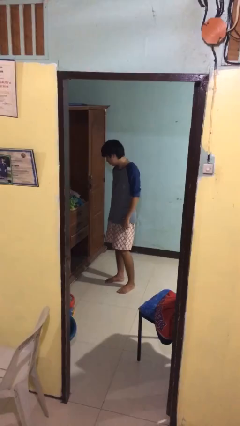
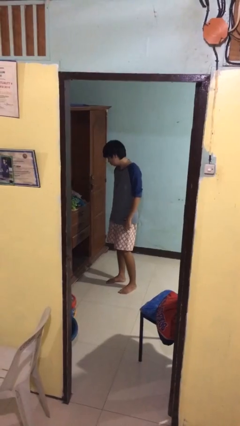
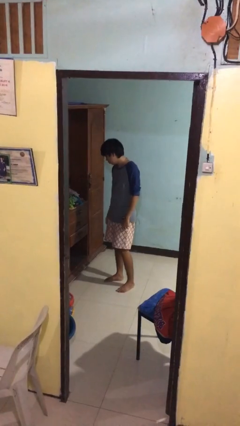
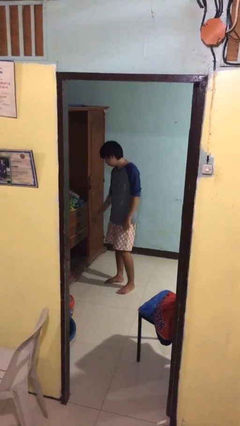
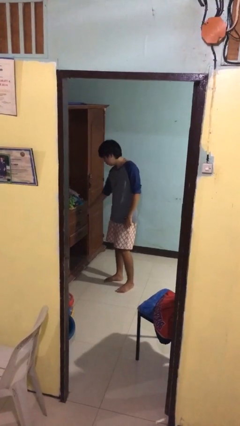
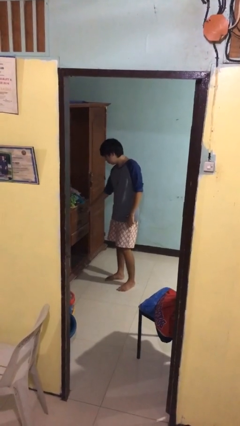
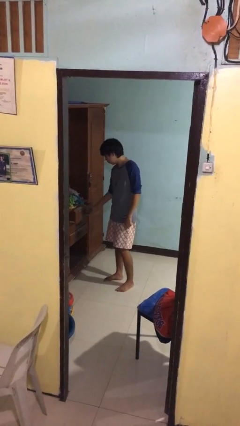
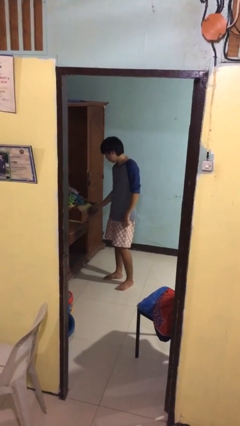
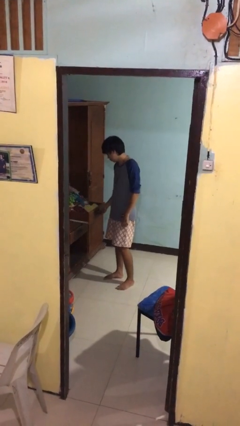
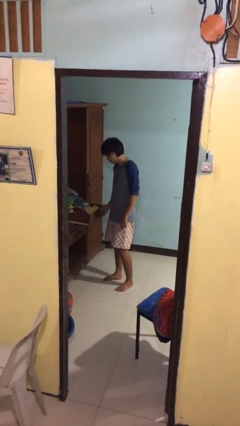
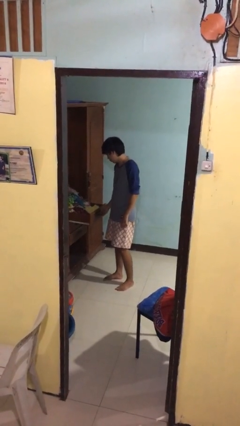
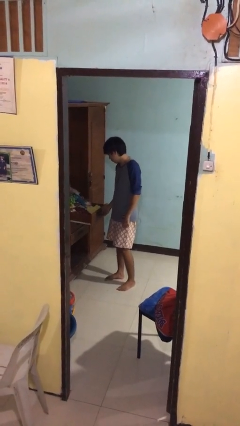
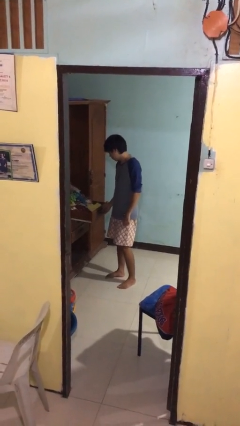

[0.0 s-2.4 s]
person opens dresser drawer

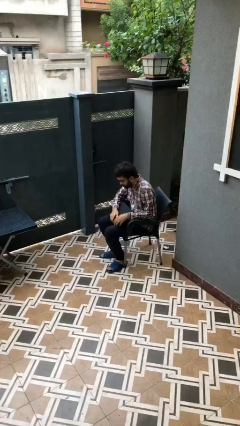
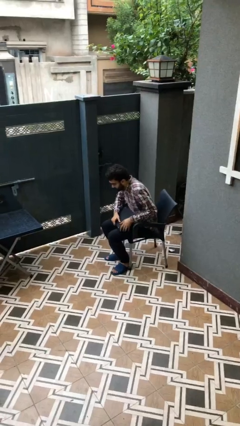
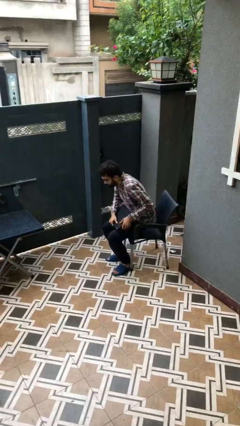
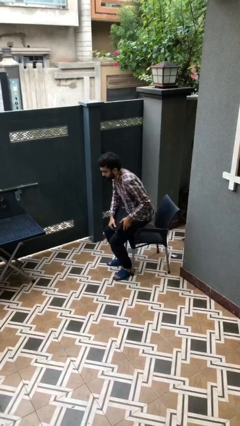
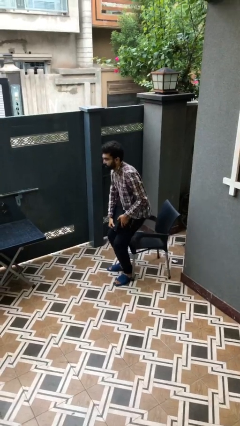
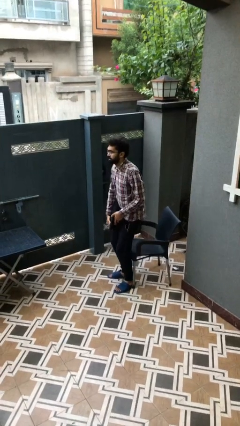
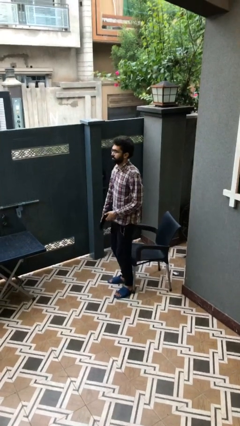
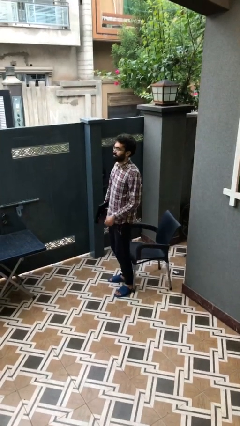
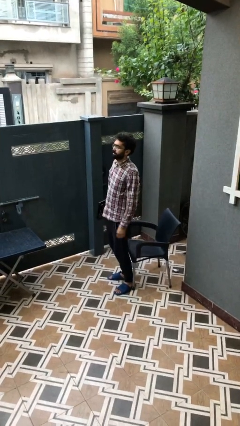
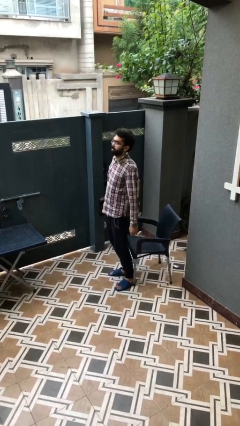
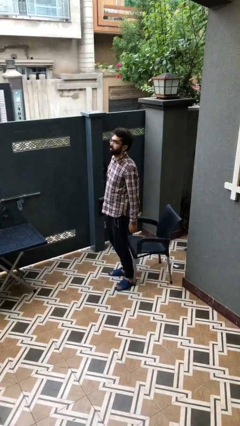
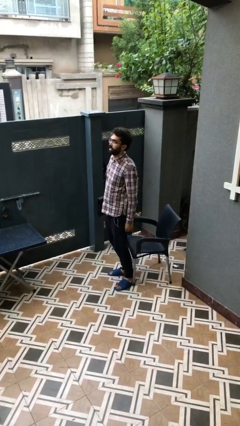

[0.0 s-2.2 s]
person stands up

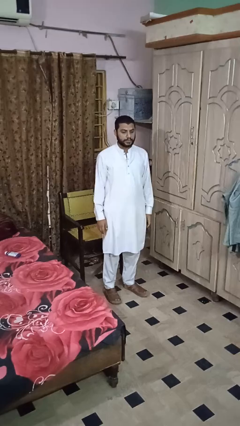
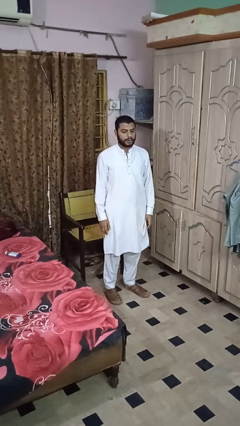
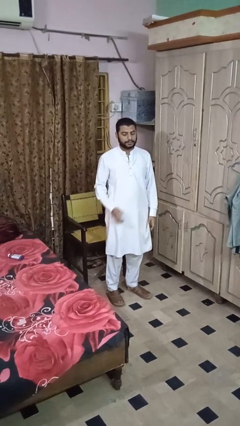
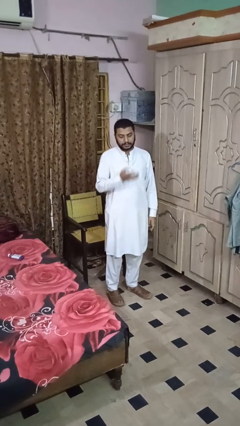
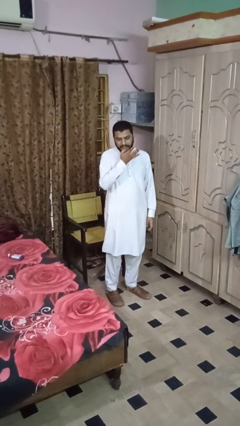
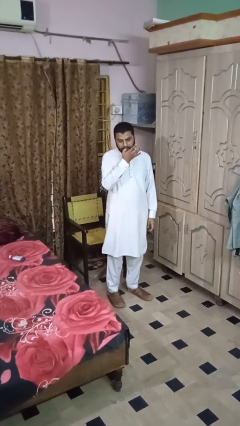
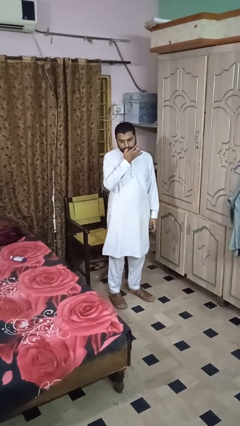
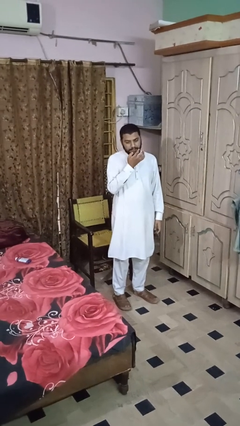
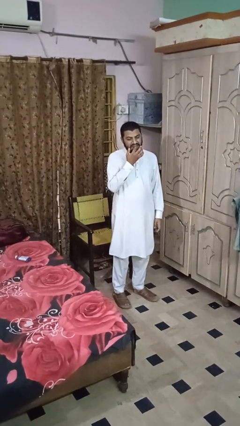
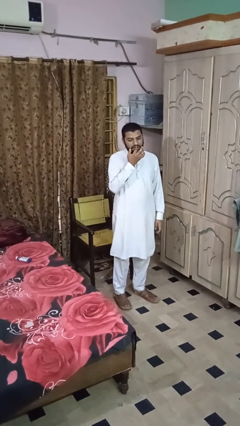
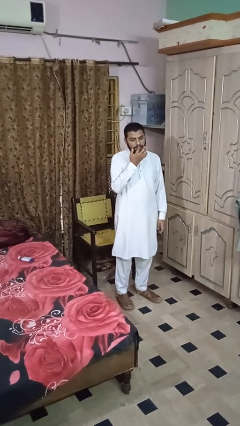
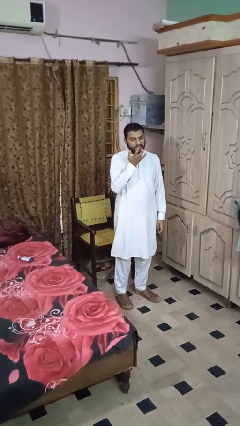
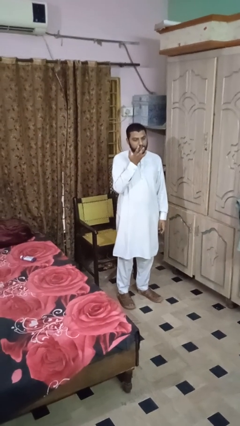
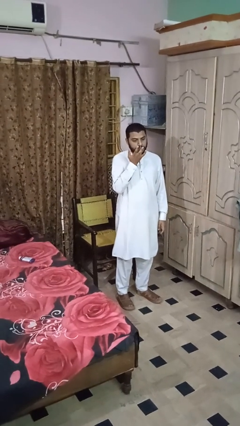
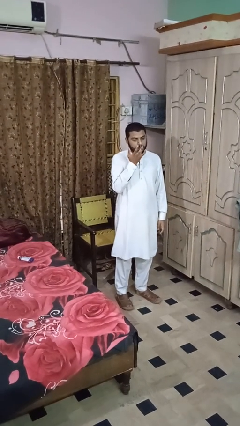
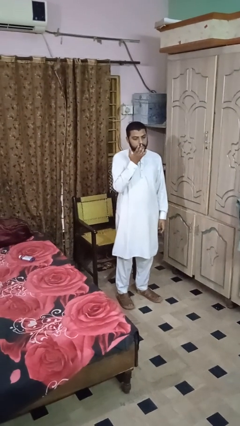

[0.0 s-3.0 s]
person licks fingers

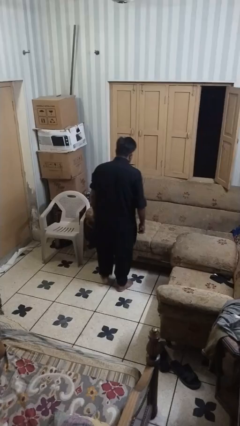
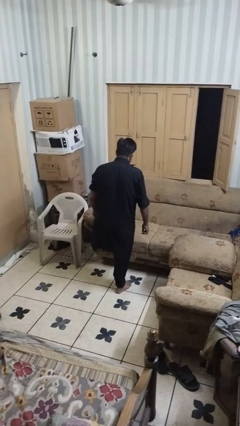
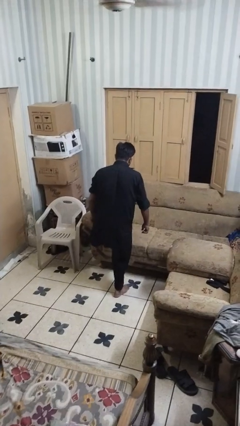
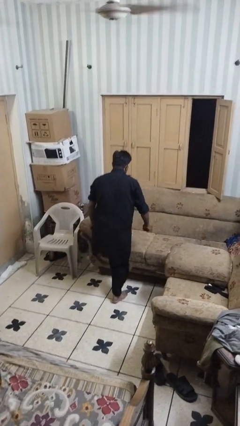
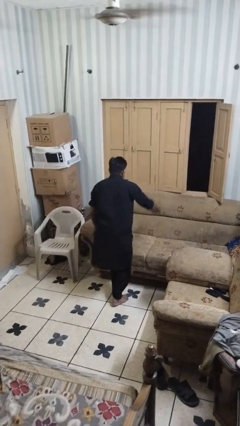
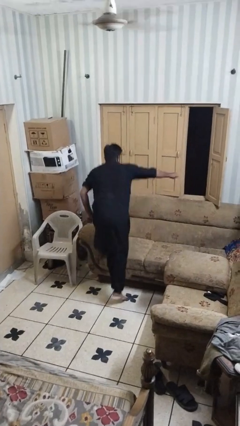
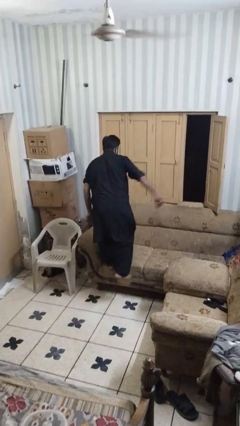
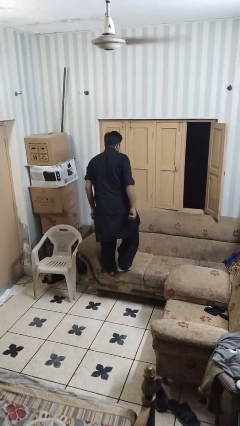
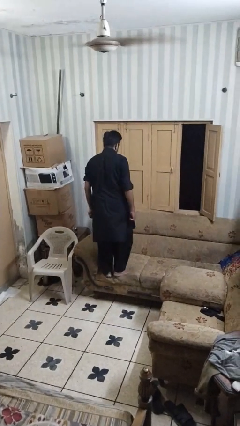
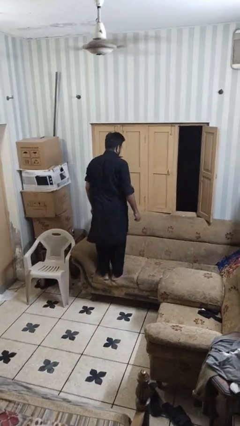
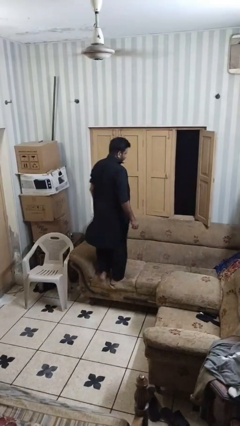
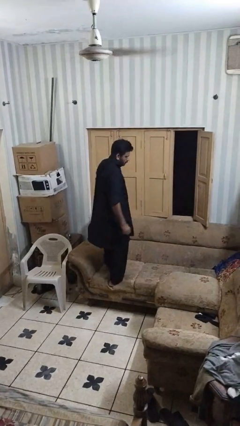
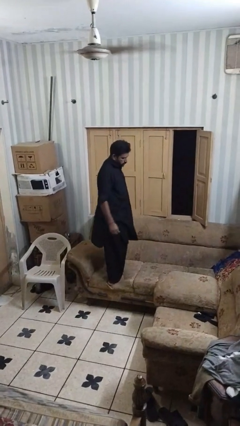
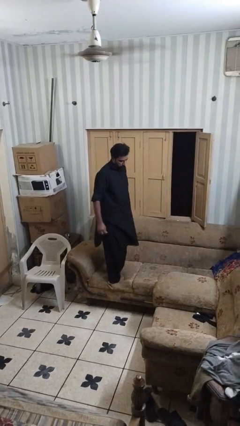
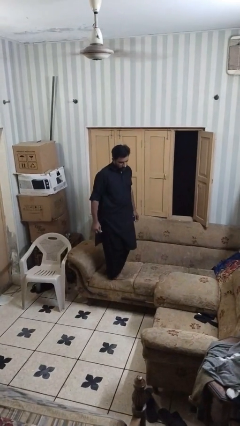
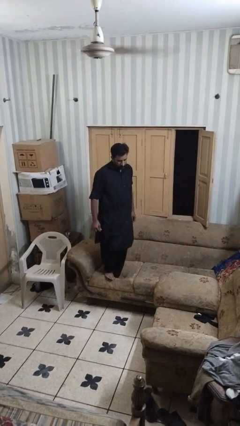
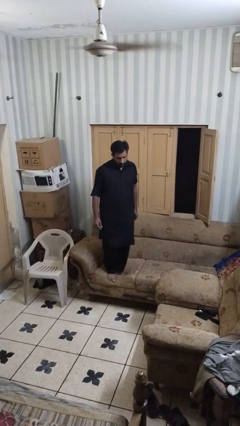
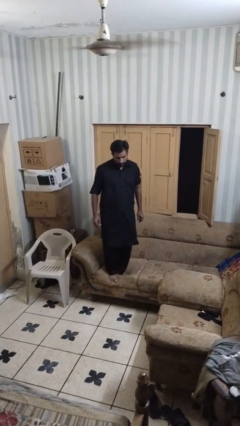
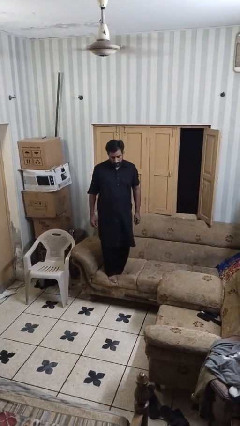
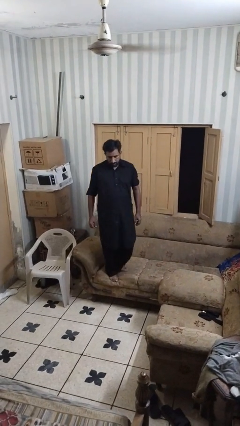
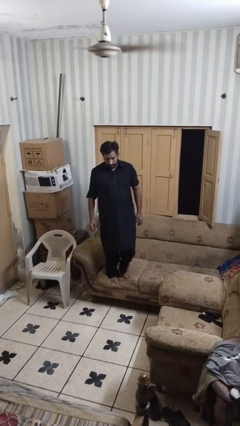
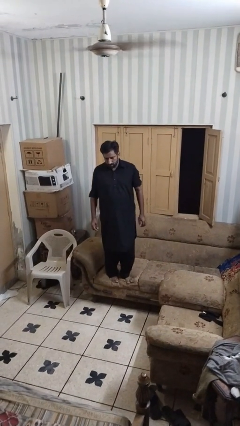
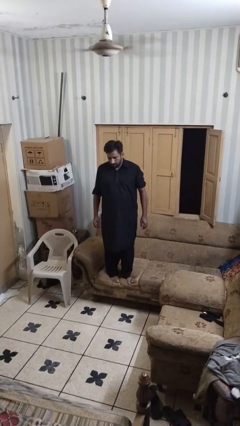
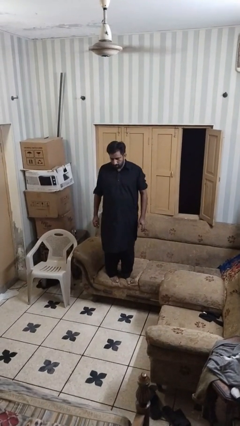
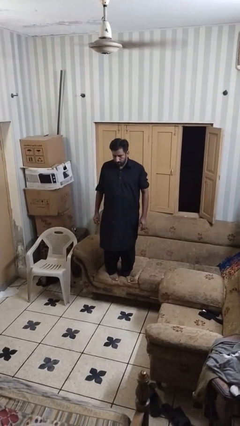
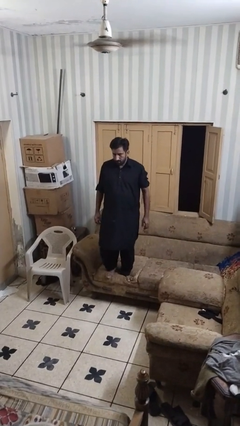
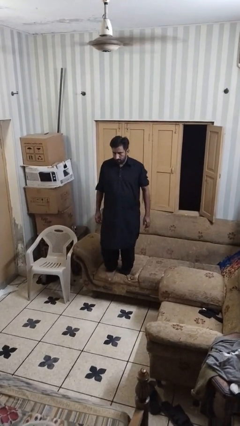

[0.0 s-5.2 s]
person climbs on couch

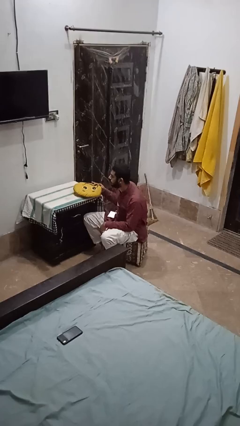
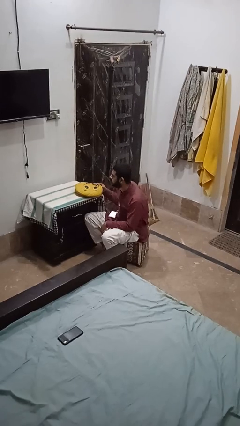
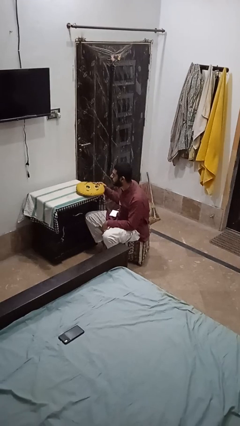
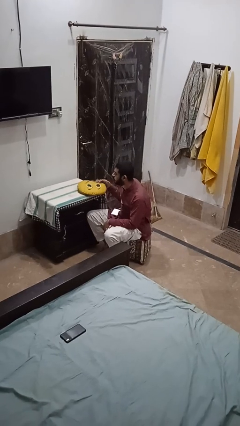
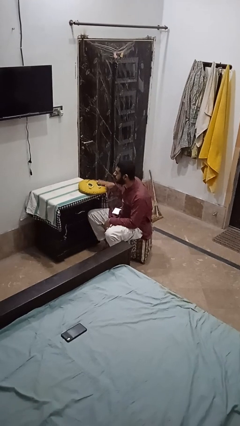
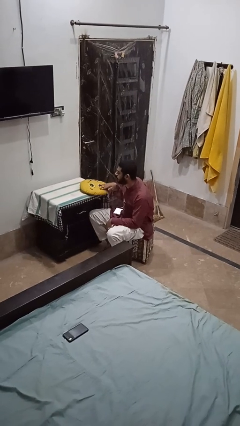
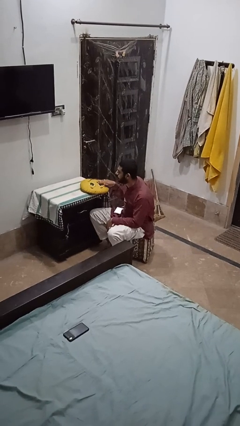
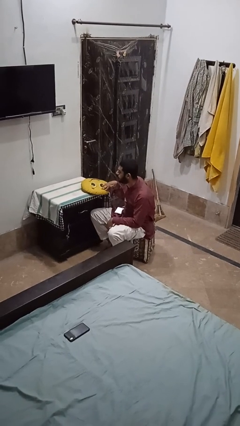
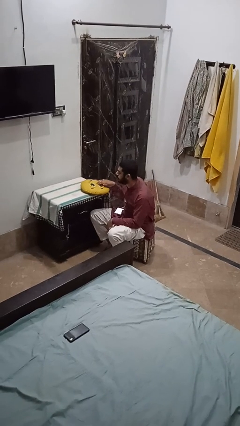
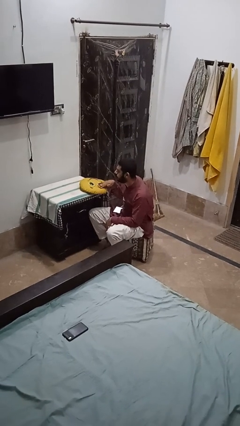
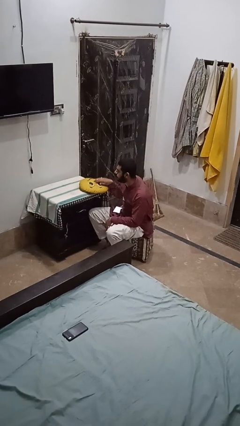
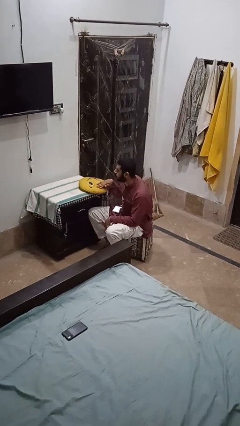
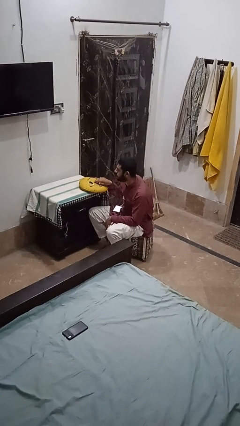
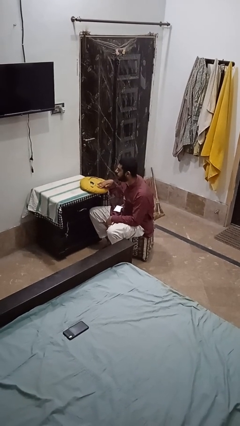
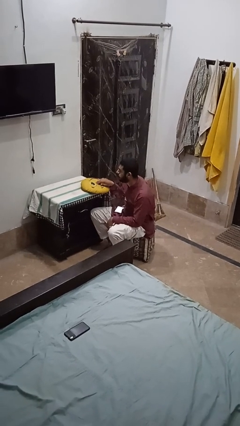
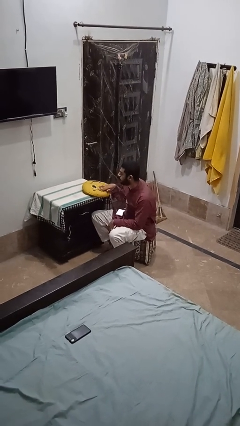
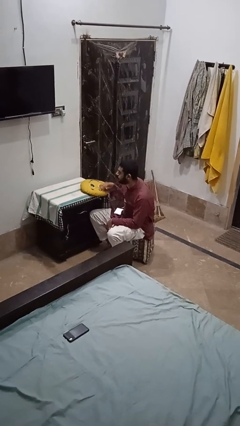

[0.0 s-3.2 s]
person waves hand over object

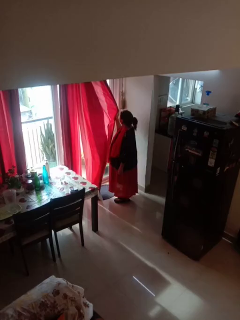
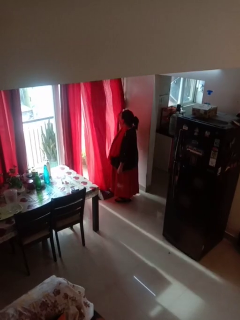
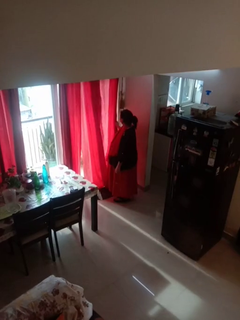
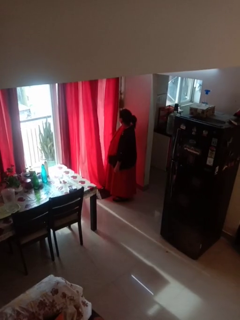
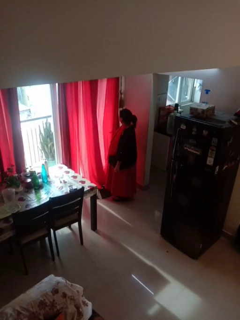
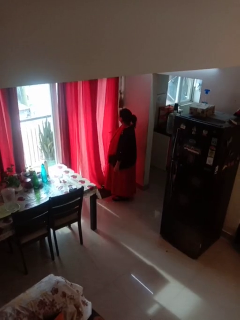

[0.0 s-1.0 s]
person closes curtains

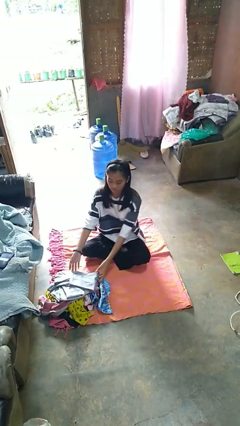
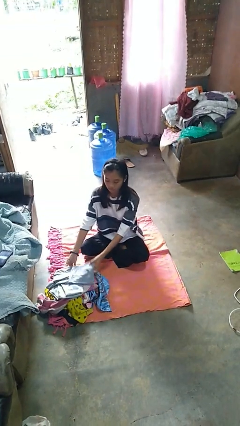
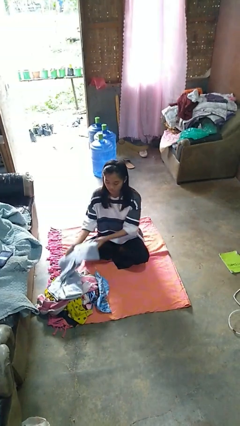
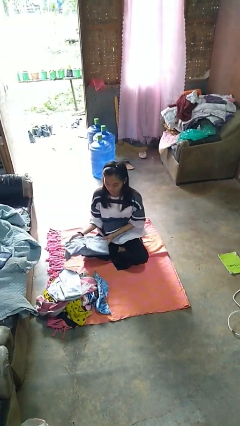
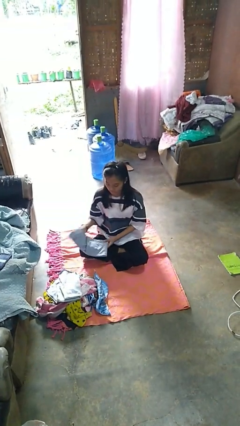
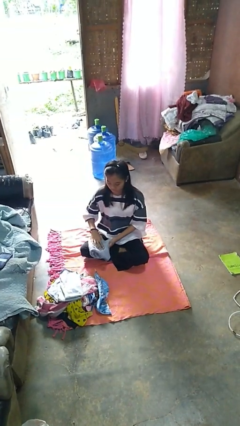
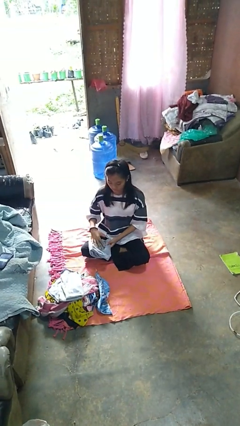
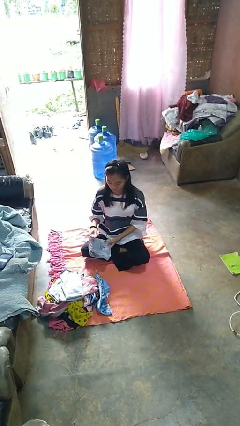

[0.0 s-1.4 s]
person folds shirt
